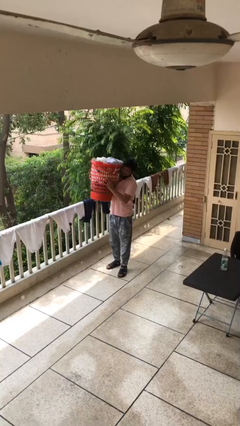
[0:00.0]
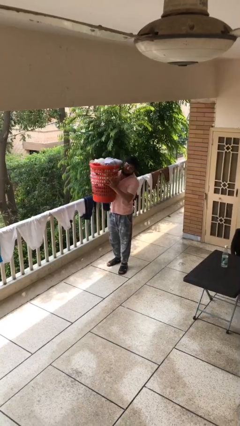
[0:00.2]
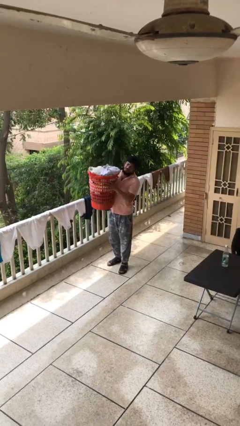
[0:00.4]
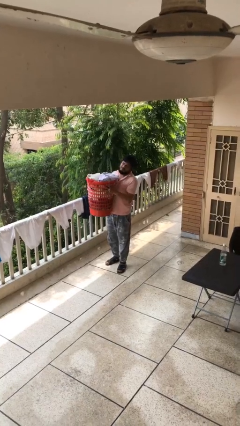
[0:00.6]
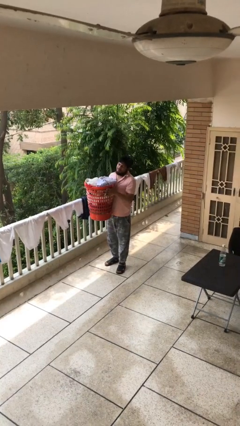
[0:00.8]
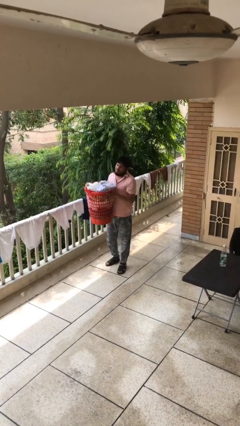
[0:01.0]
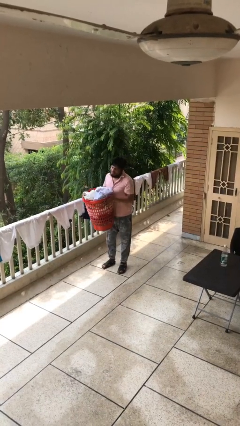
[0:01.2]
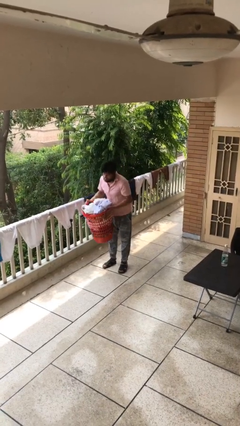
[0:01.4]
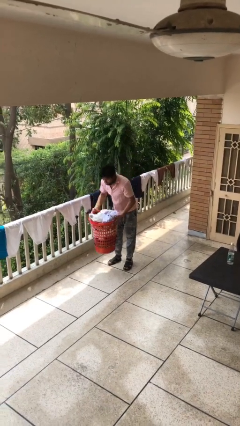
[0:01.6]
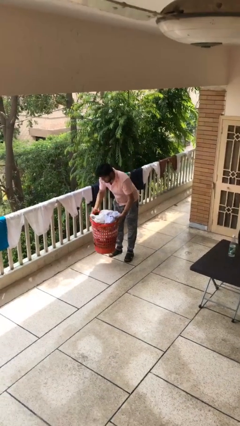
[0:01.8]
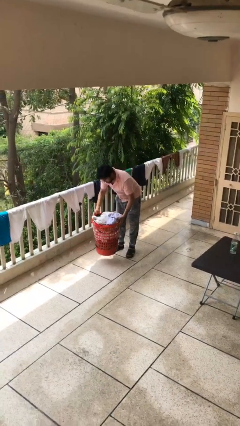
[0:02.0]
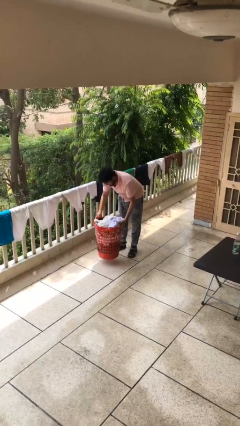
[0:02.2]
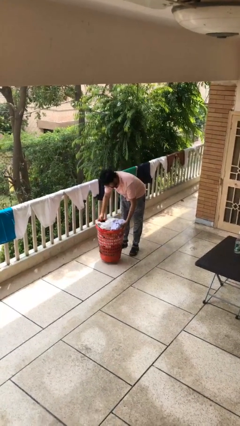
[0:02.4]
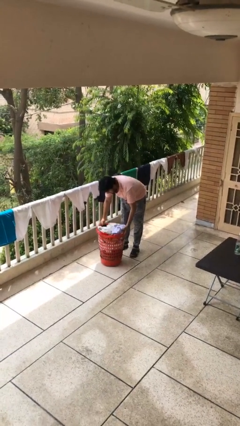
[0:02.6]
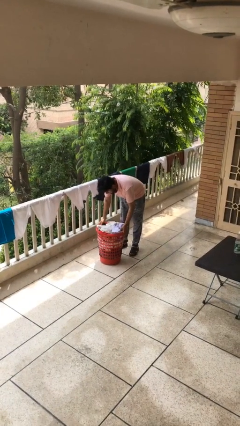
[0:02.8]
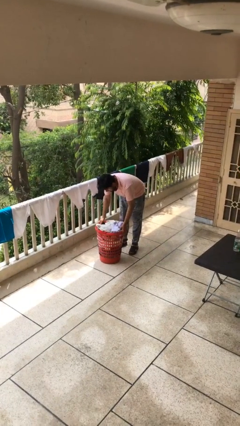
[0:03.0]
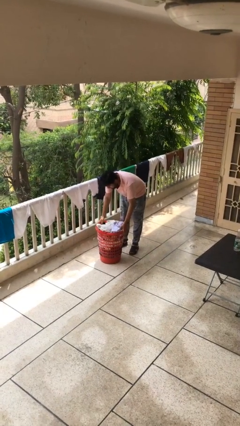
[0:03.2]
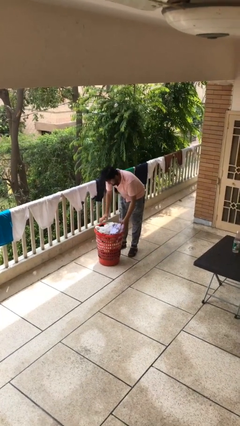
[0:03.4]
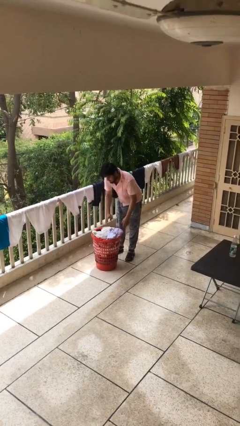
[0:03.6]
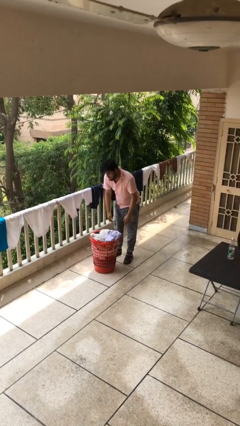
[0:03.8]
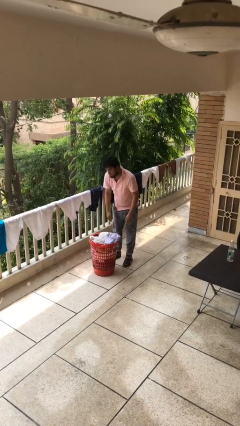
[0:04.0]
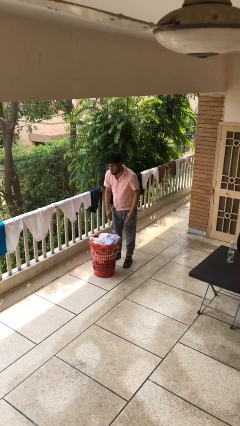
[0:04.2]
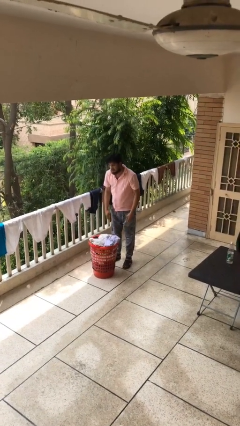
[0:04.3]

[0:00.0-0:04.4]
person puts down object on floor

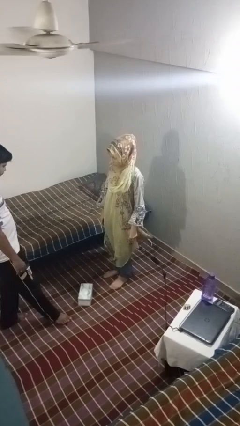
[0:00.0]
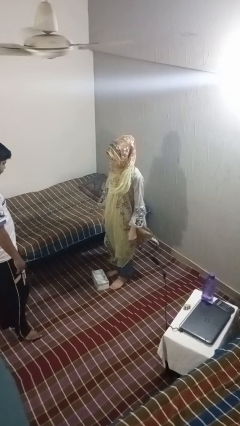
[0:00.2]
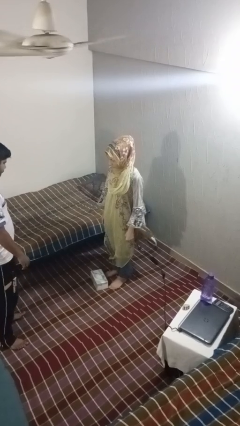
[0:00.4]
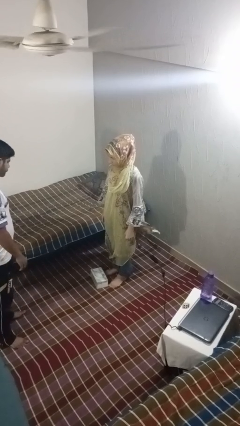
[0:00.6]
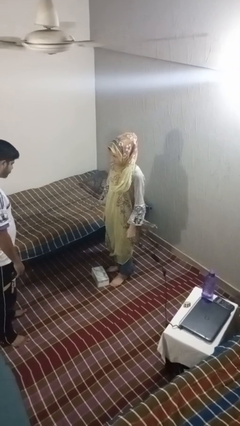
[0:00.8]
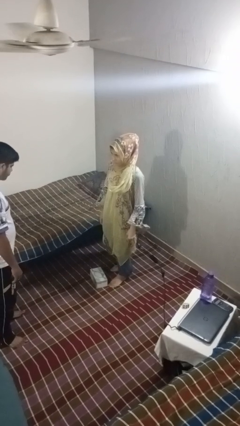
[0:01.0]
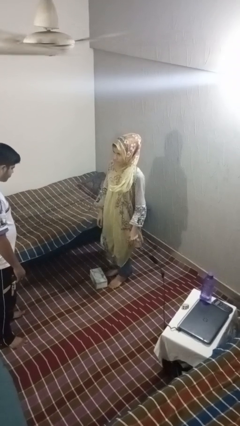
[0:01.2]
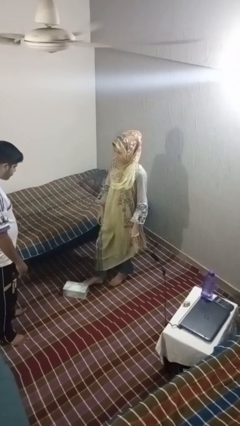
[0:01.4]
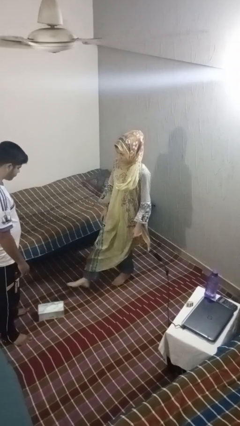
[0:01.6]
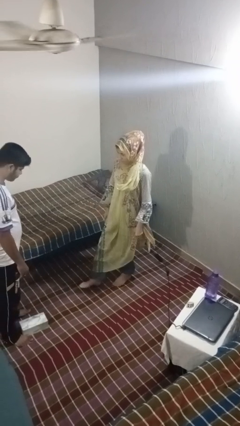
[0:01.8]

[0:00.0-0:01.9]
person kicks object to person

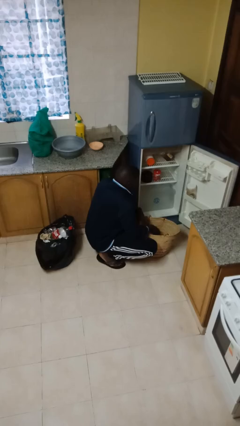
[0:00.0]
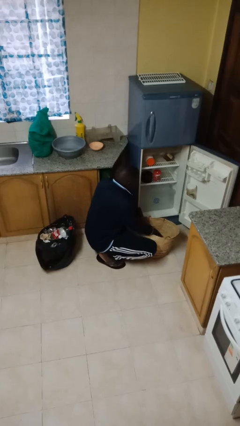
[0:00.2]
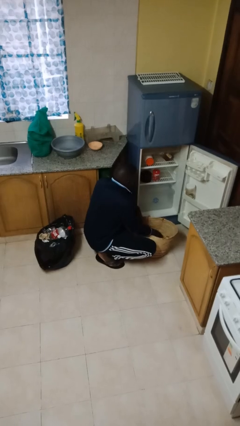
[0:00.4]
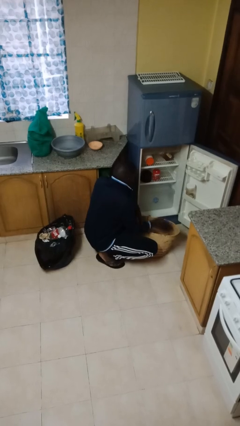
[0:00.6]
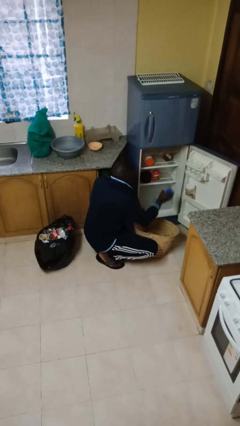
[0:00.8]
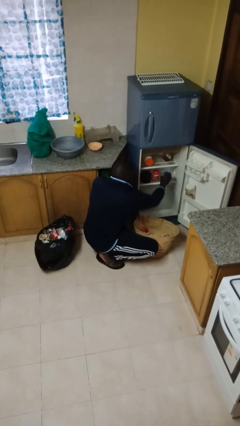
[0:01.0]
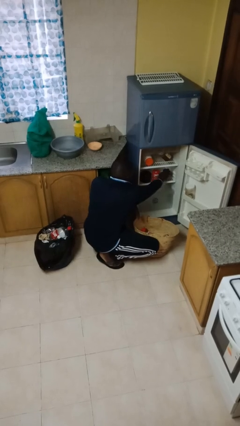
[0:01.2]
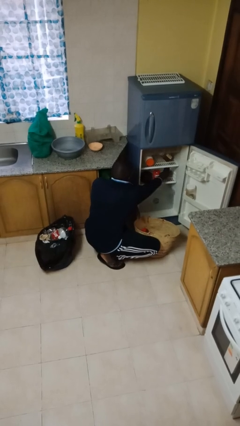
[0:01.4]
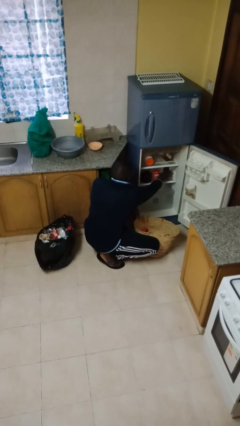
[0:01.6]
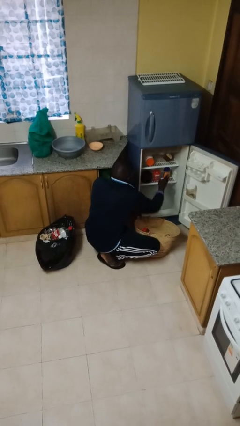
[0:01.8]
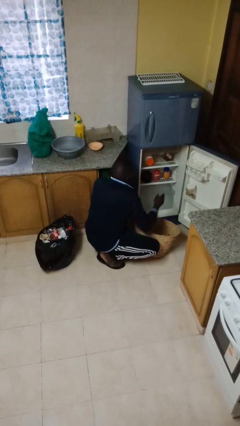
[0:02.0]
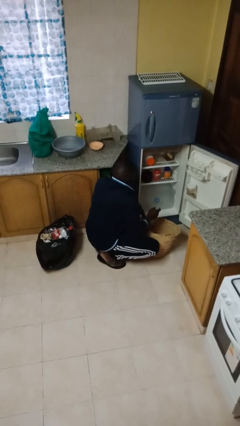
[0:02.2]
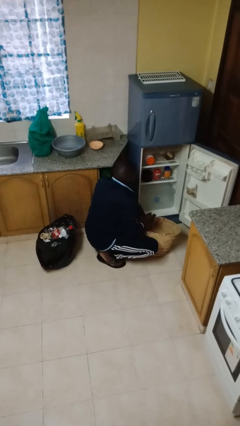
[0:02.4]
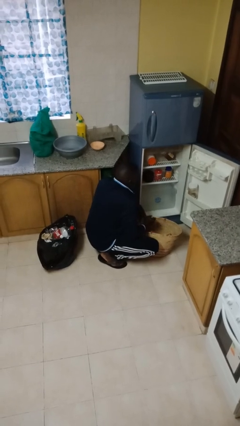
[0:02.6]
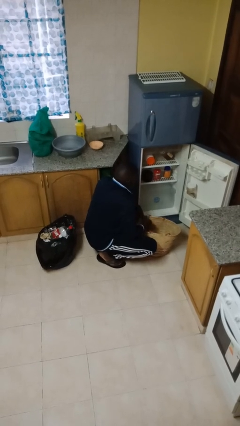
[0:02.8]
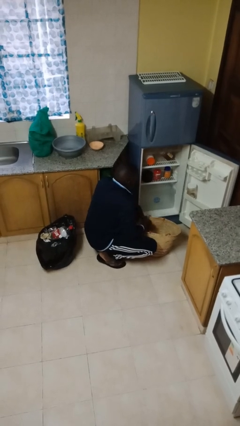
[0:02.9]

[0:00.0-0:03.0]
person loads groceries into refrigerator

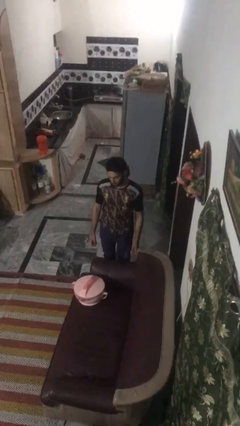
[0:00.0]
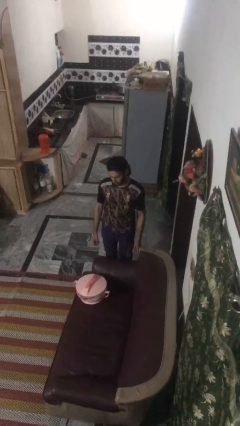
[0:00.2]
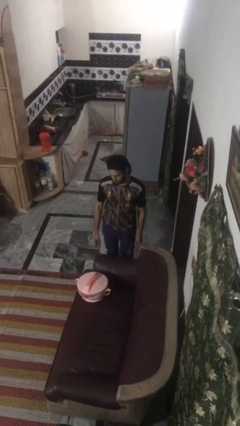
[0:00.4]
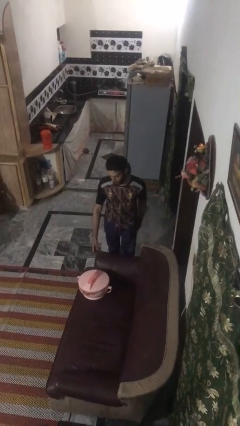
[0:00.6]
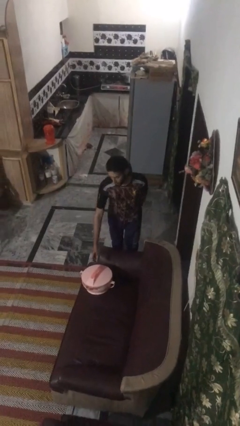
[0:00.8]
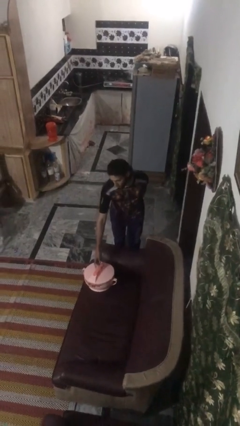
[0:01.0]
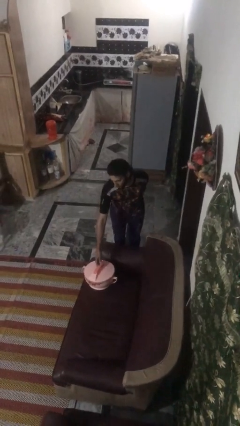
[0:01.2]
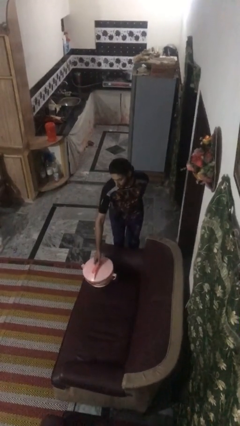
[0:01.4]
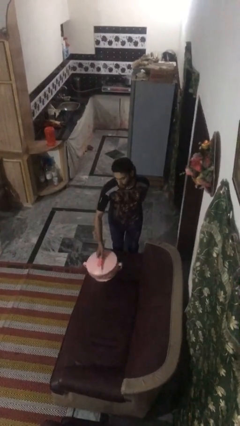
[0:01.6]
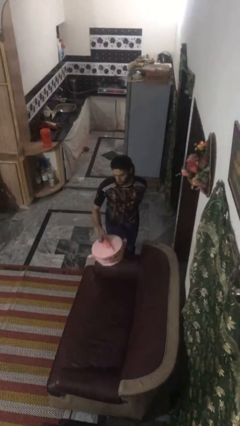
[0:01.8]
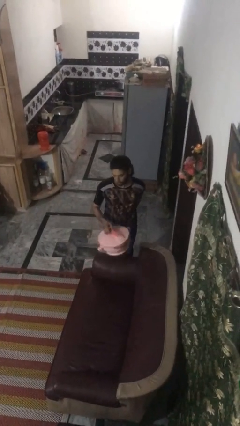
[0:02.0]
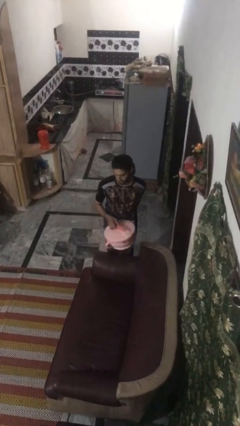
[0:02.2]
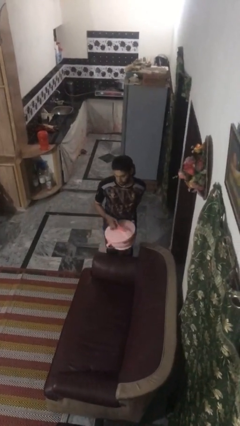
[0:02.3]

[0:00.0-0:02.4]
person picks up object from couch

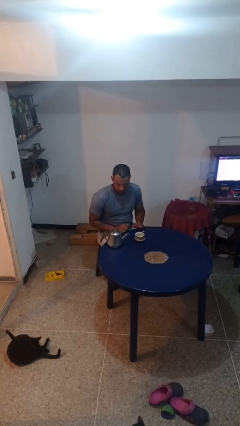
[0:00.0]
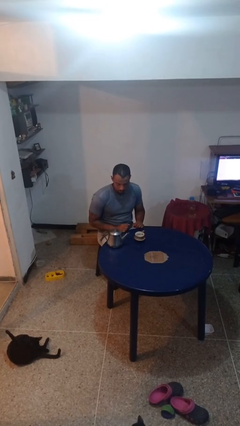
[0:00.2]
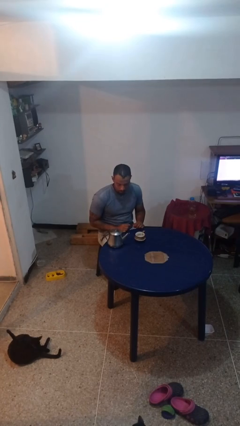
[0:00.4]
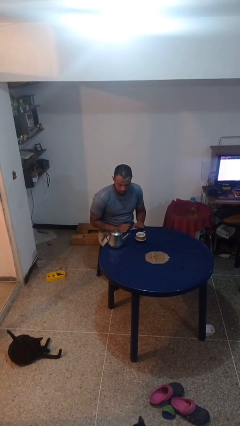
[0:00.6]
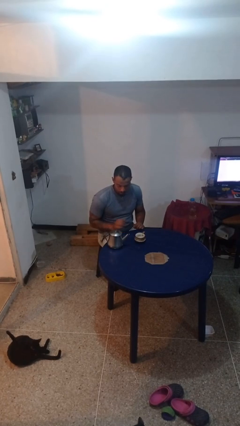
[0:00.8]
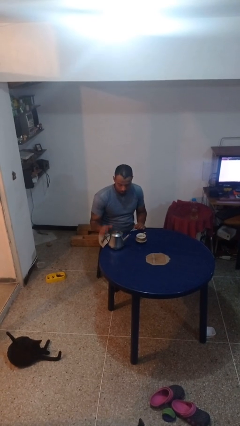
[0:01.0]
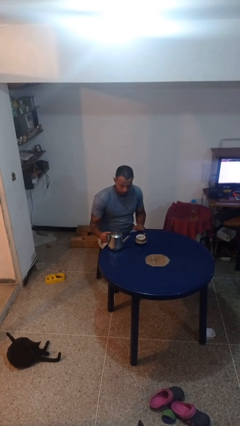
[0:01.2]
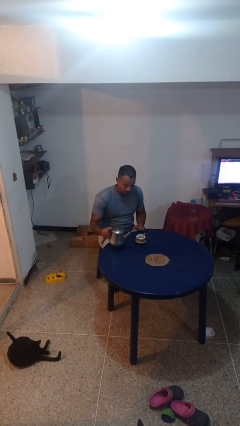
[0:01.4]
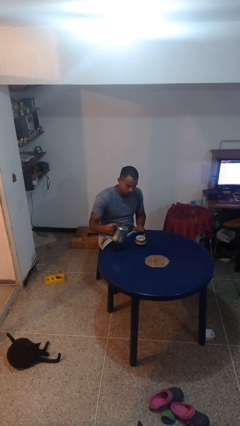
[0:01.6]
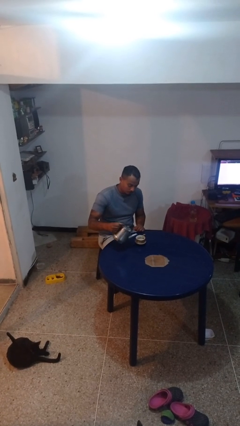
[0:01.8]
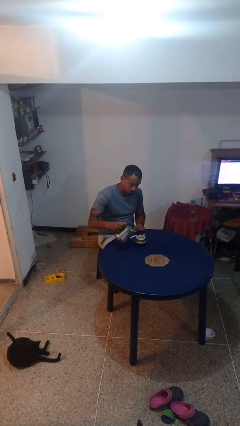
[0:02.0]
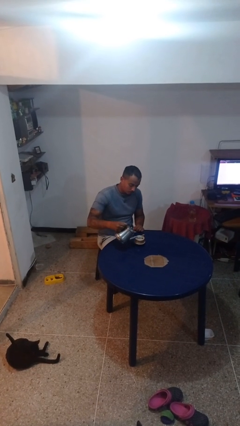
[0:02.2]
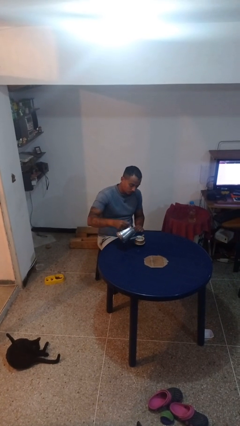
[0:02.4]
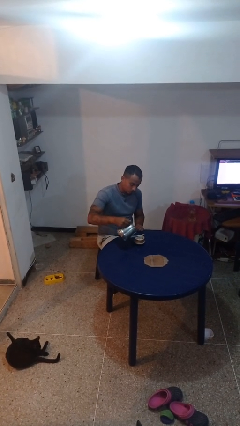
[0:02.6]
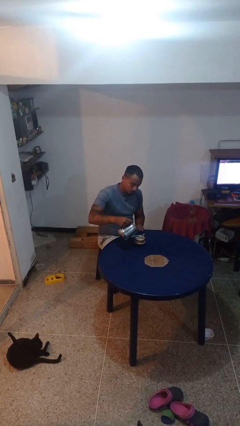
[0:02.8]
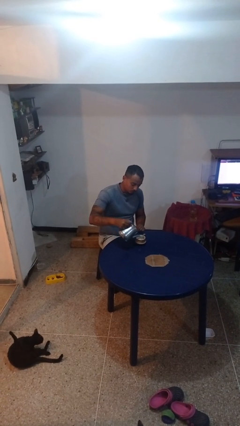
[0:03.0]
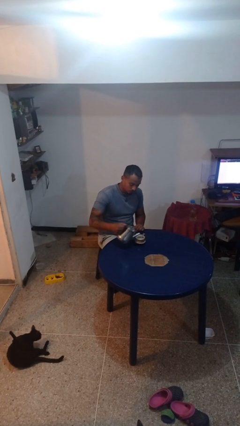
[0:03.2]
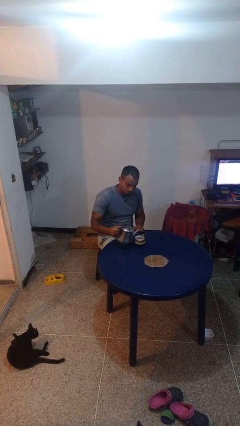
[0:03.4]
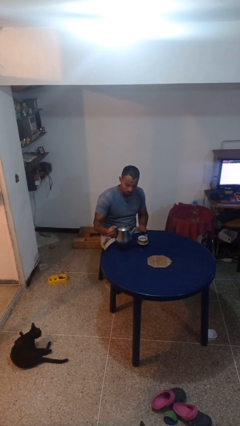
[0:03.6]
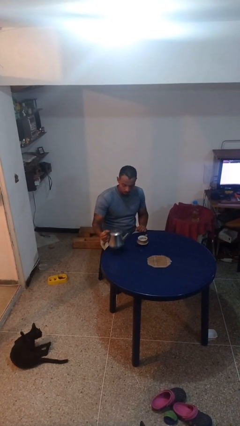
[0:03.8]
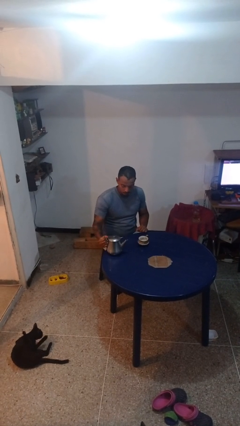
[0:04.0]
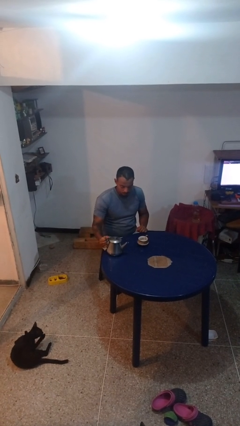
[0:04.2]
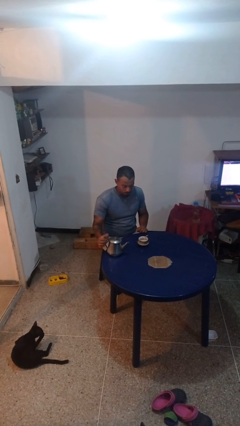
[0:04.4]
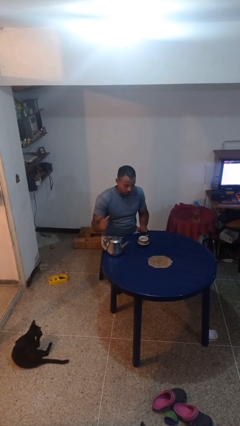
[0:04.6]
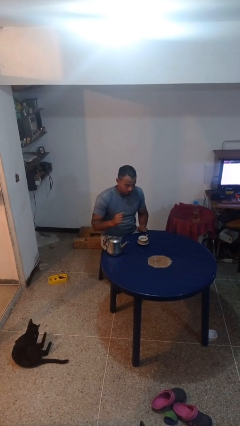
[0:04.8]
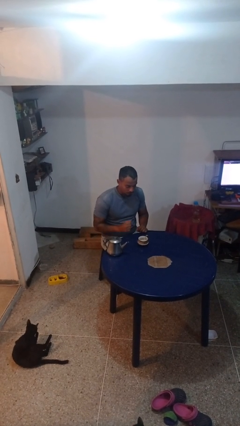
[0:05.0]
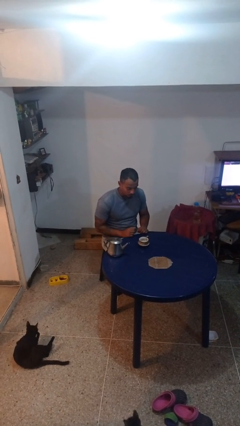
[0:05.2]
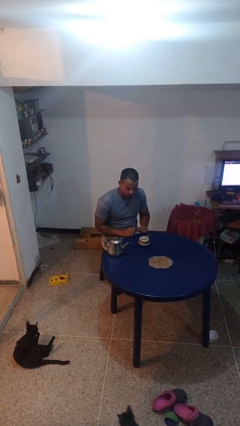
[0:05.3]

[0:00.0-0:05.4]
person pours coffee into mug

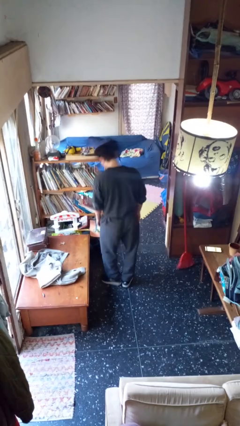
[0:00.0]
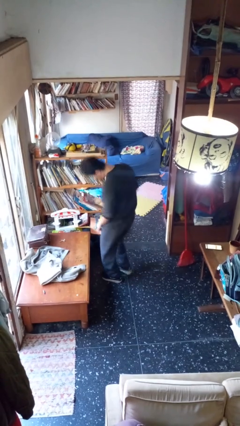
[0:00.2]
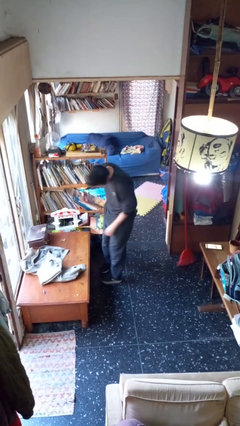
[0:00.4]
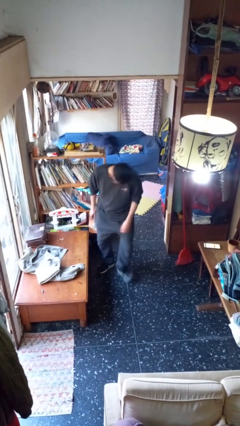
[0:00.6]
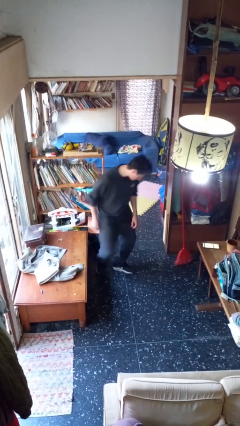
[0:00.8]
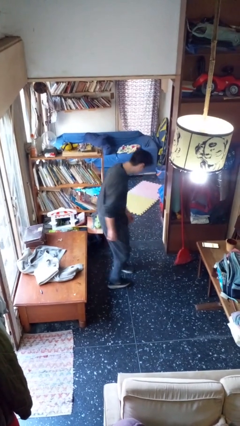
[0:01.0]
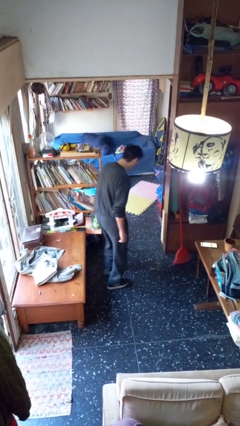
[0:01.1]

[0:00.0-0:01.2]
person twirls
